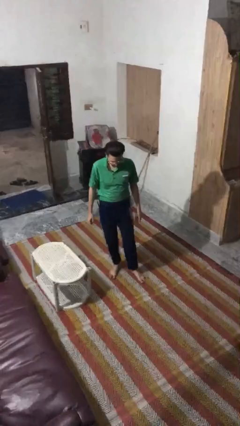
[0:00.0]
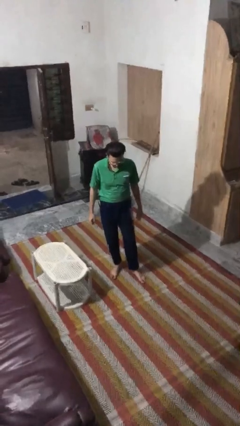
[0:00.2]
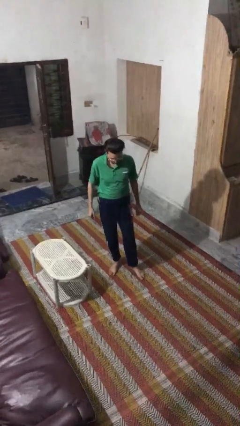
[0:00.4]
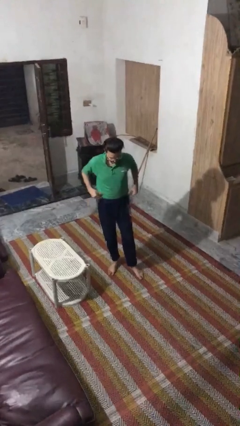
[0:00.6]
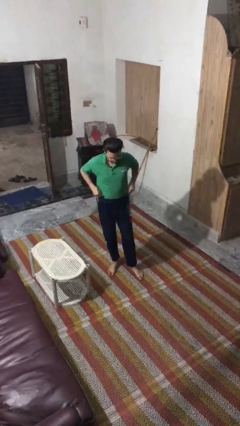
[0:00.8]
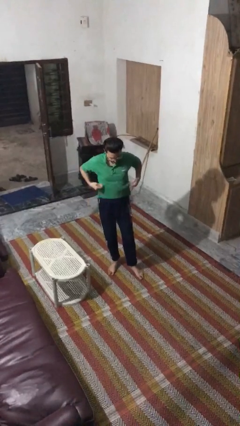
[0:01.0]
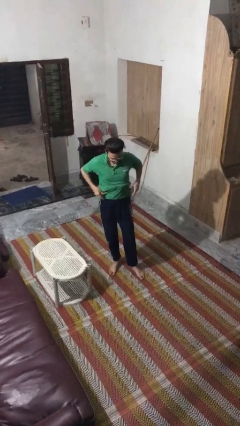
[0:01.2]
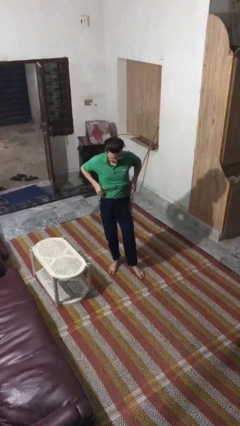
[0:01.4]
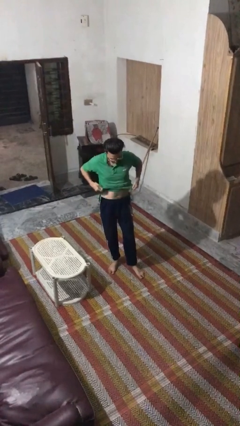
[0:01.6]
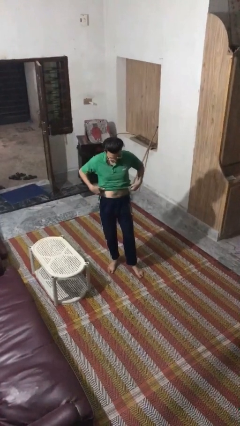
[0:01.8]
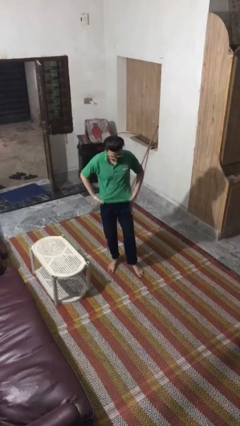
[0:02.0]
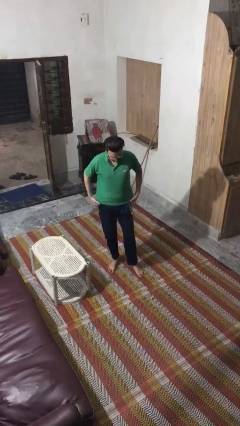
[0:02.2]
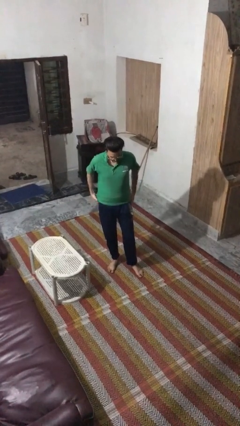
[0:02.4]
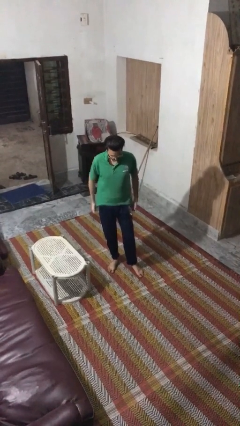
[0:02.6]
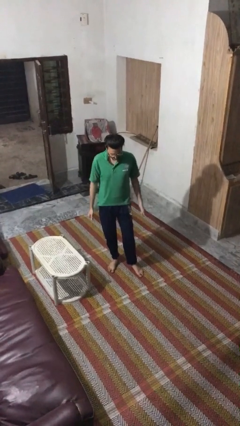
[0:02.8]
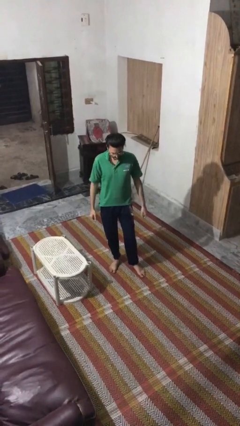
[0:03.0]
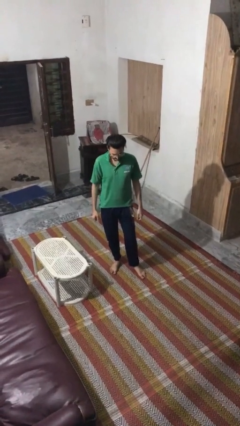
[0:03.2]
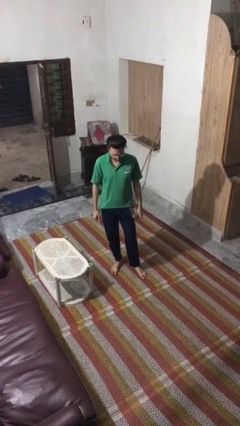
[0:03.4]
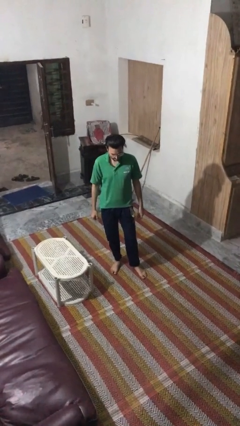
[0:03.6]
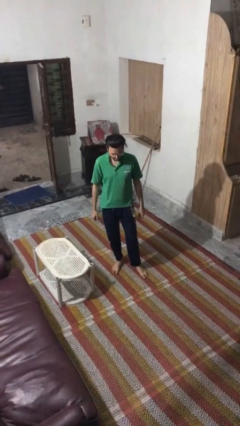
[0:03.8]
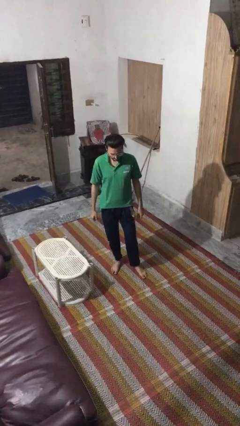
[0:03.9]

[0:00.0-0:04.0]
person untucks shirt

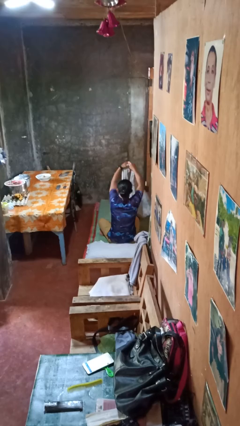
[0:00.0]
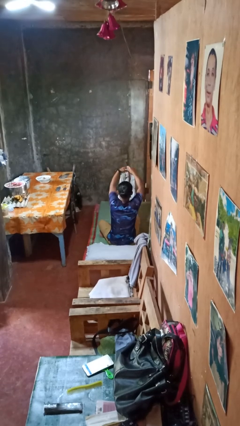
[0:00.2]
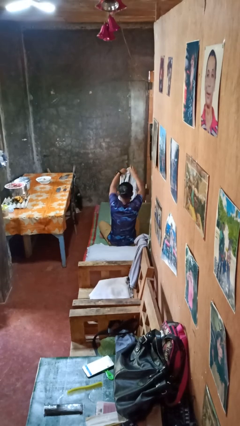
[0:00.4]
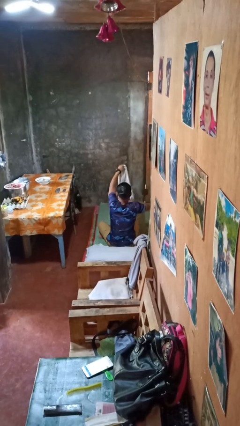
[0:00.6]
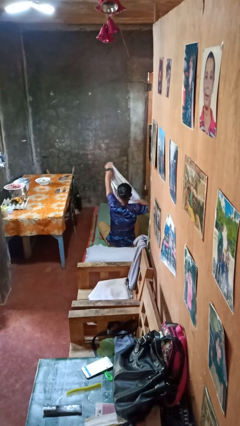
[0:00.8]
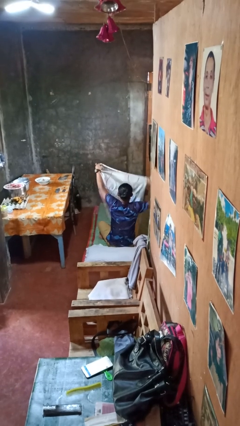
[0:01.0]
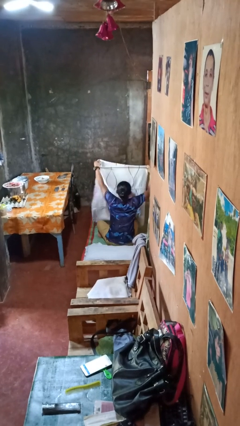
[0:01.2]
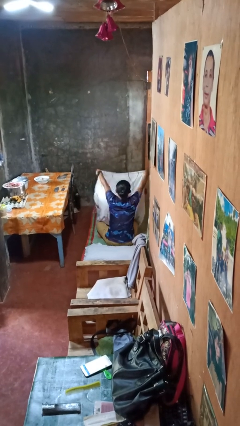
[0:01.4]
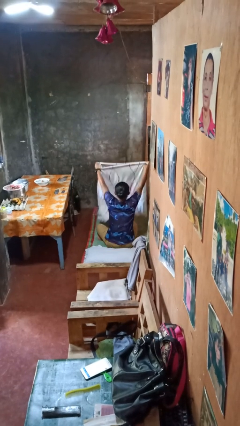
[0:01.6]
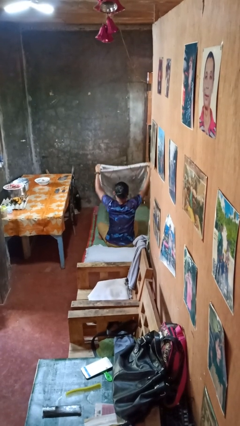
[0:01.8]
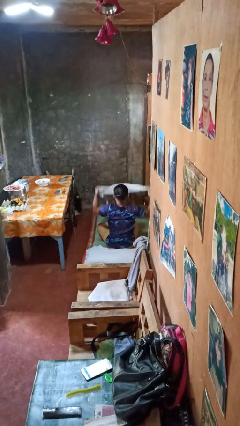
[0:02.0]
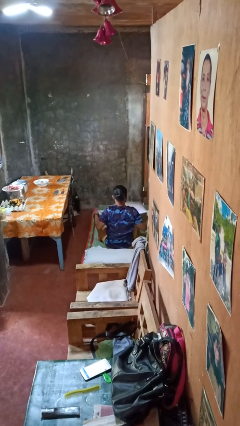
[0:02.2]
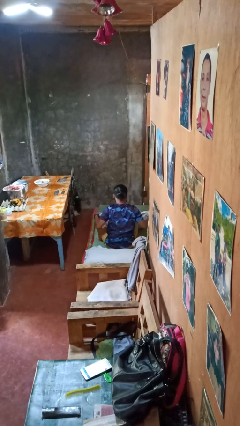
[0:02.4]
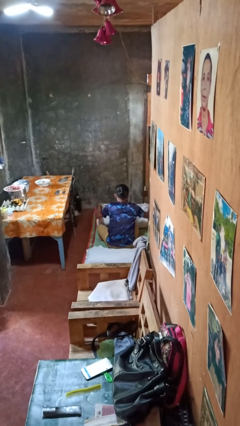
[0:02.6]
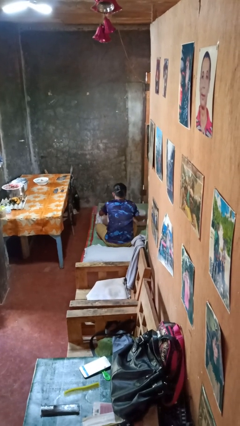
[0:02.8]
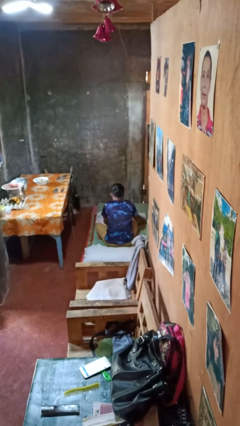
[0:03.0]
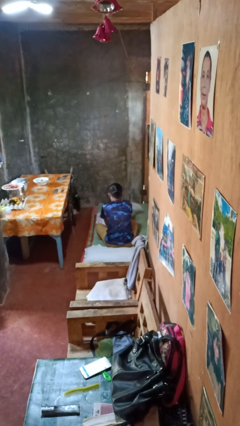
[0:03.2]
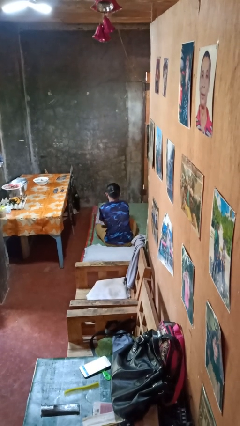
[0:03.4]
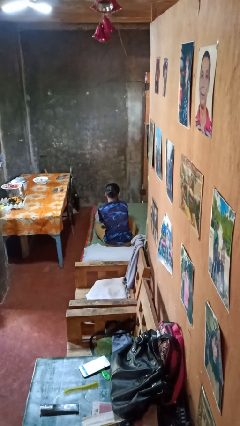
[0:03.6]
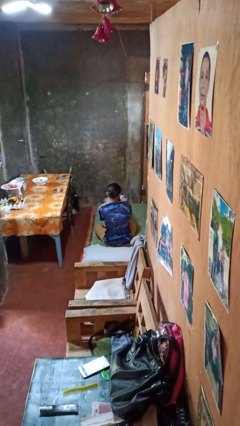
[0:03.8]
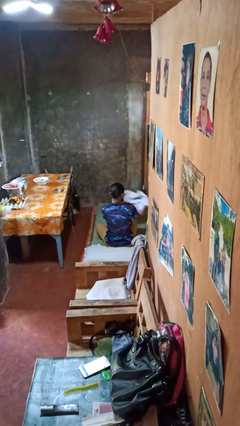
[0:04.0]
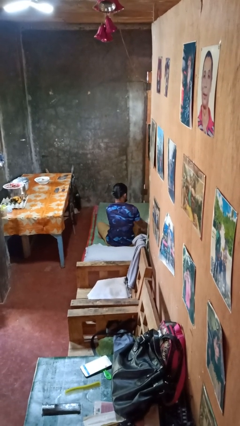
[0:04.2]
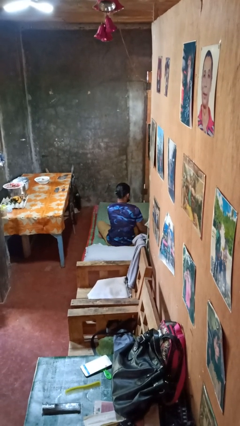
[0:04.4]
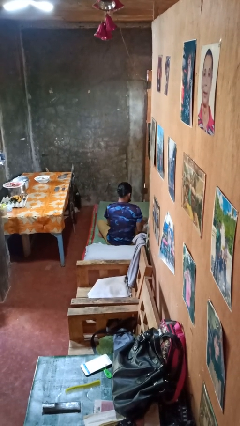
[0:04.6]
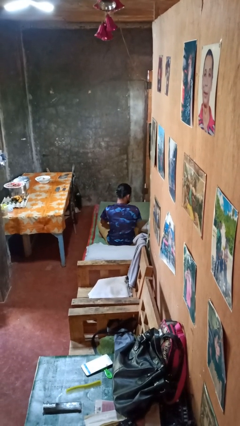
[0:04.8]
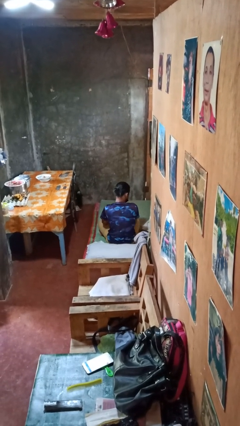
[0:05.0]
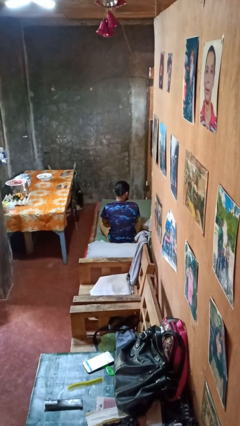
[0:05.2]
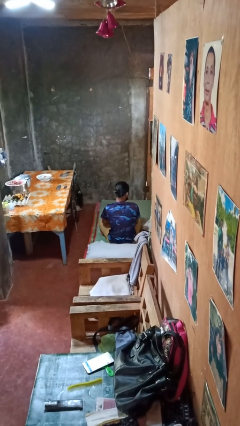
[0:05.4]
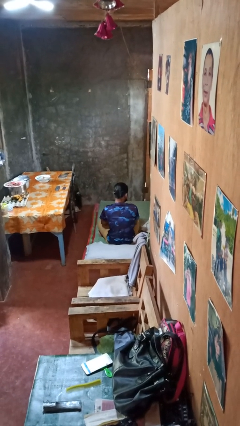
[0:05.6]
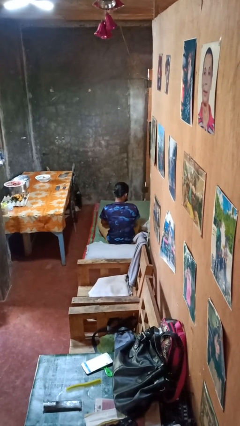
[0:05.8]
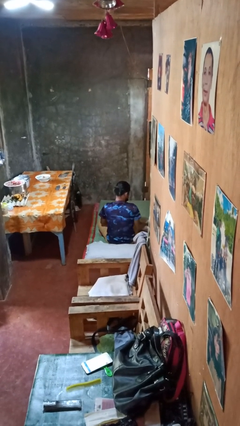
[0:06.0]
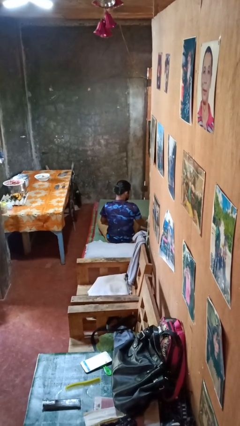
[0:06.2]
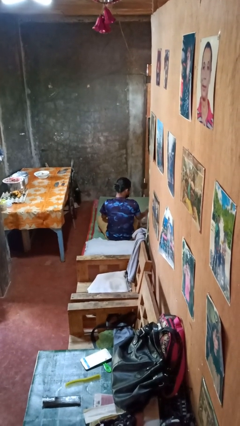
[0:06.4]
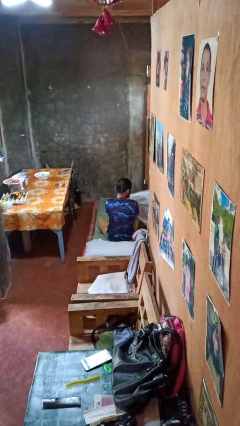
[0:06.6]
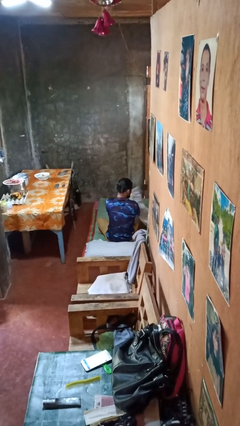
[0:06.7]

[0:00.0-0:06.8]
person folds blanket

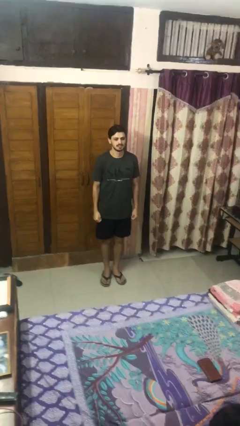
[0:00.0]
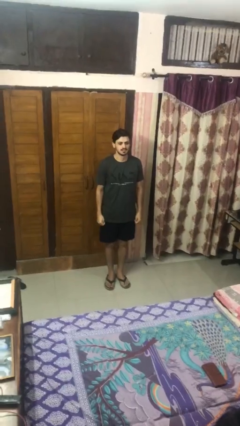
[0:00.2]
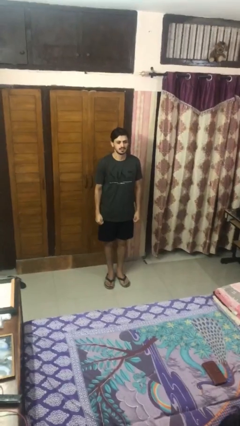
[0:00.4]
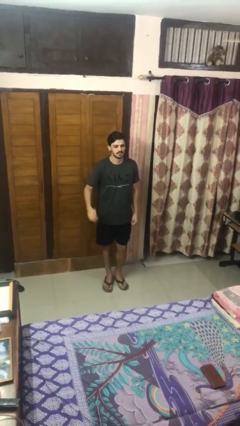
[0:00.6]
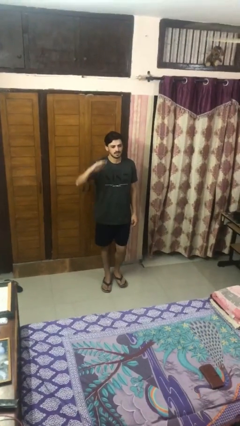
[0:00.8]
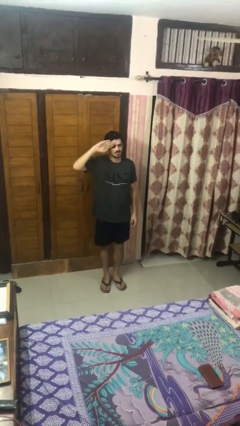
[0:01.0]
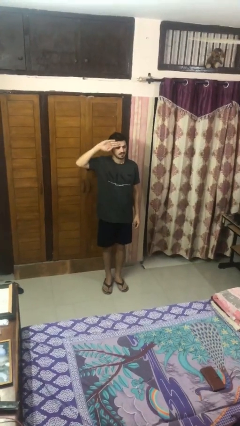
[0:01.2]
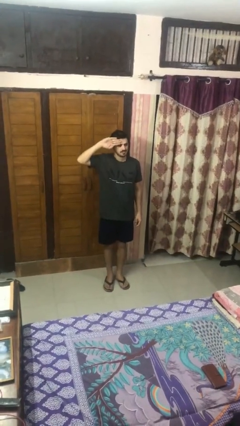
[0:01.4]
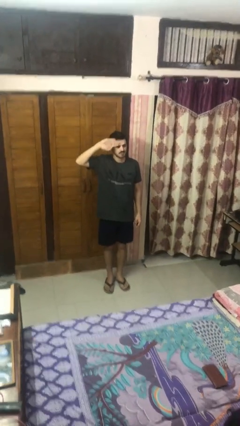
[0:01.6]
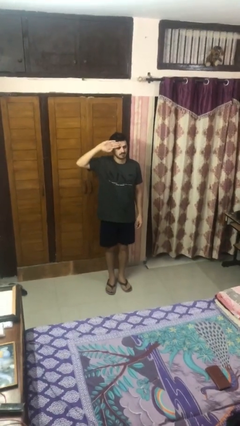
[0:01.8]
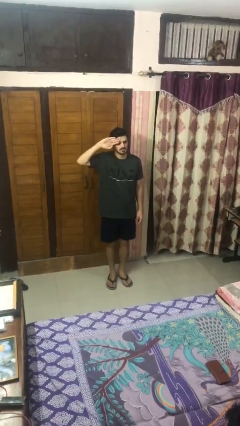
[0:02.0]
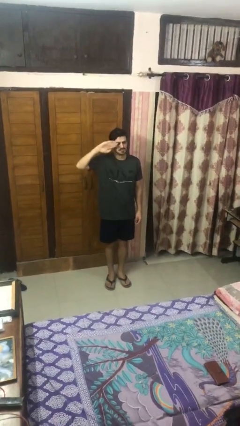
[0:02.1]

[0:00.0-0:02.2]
person salutes

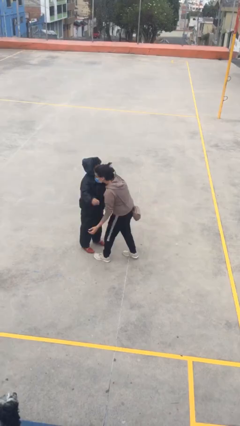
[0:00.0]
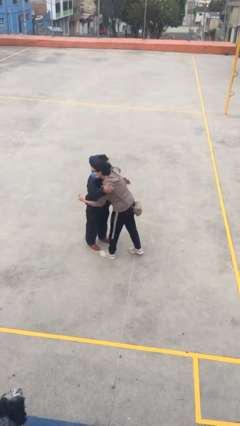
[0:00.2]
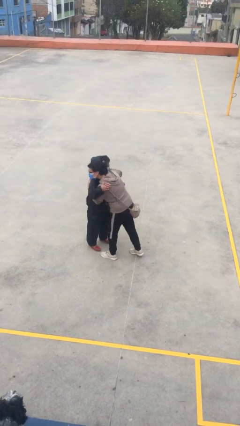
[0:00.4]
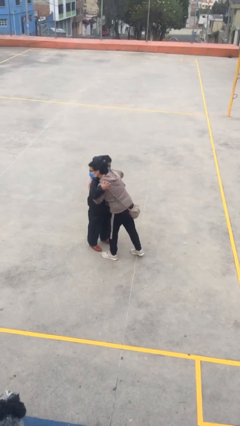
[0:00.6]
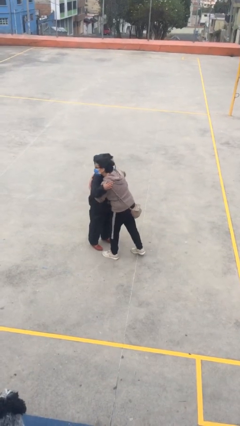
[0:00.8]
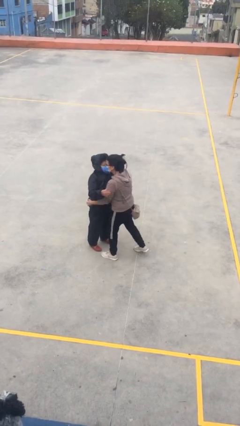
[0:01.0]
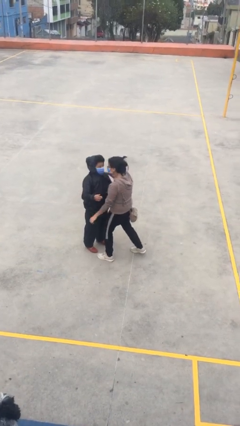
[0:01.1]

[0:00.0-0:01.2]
person embraces person

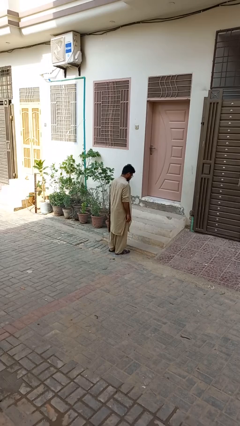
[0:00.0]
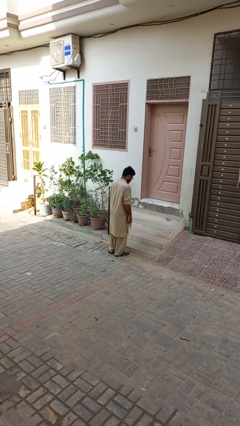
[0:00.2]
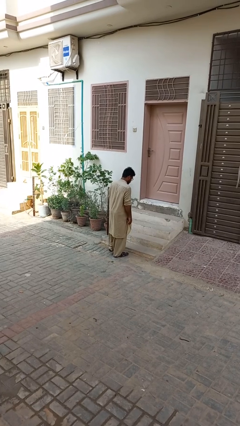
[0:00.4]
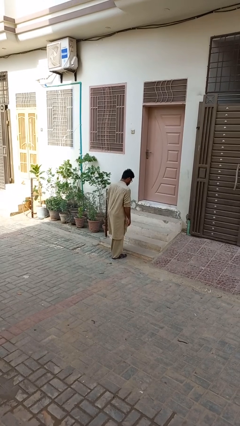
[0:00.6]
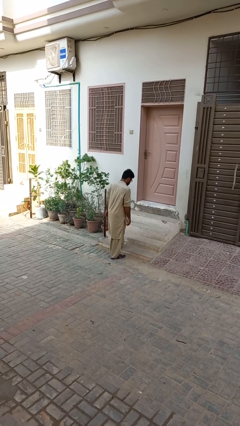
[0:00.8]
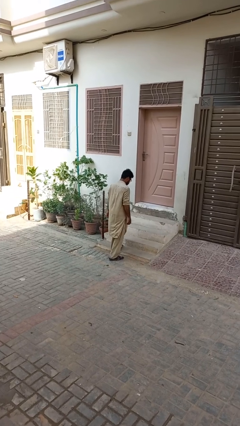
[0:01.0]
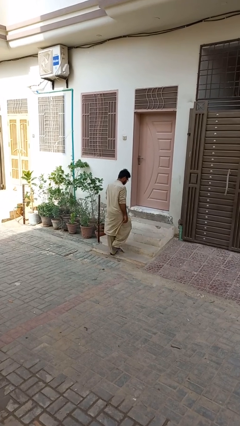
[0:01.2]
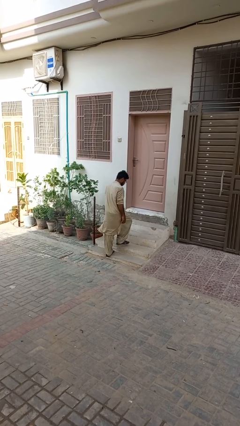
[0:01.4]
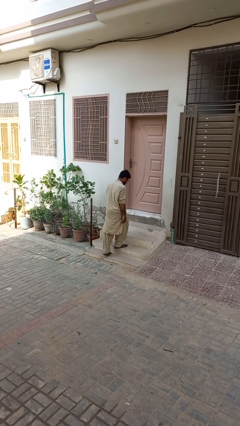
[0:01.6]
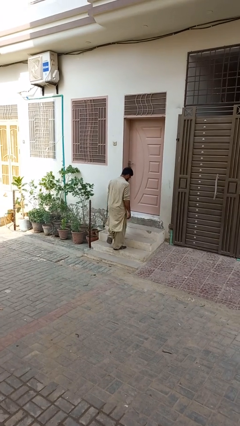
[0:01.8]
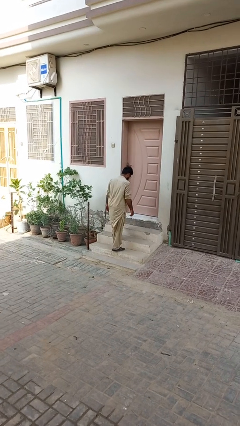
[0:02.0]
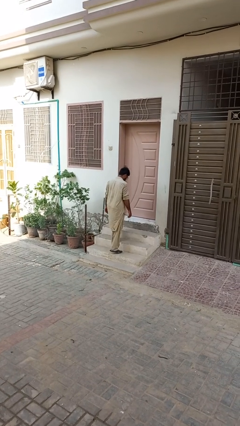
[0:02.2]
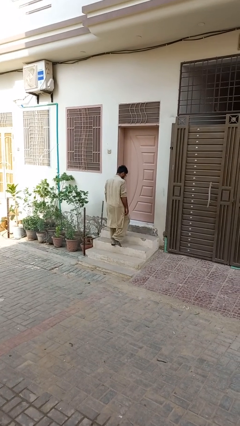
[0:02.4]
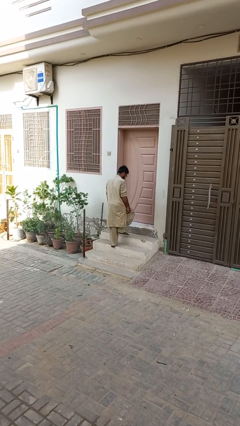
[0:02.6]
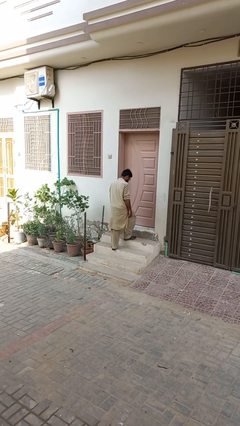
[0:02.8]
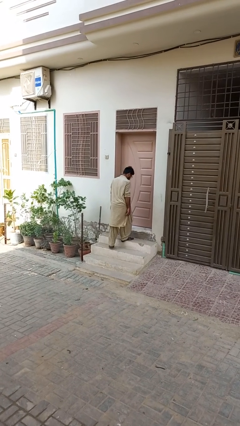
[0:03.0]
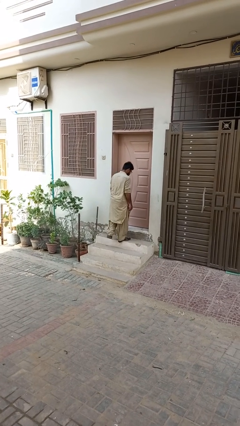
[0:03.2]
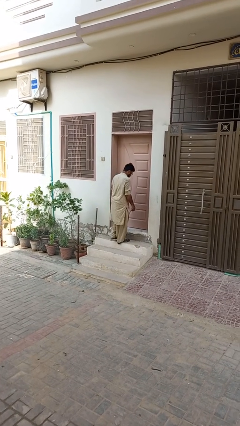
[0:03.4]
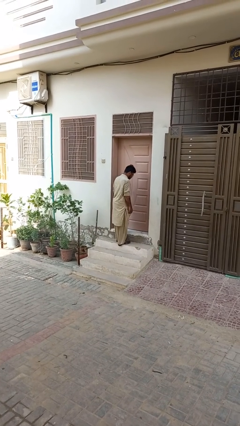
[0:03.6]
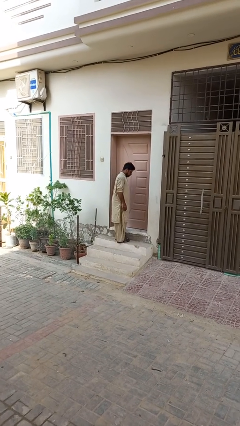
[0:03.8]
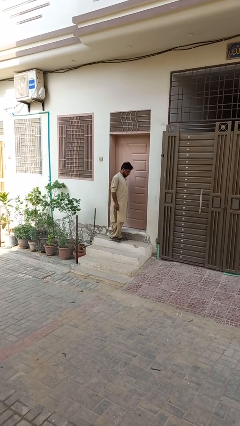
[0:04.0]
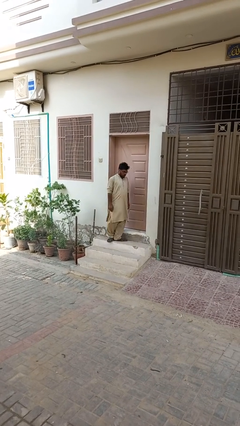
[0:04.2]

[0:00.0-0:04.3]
person climbs up stairs
